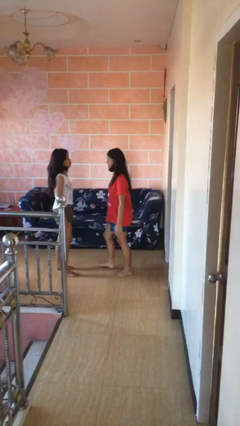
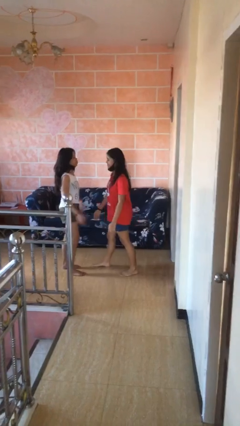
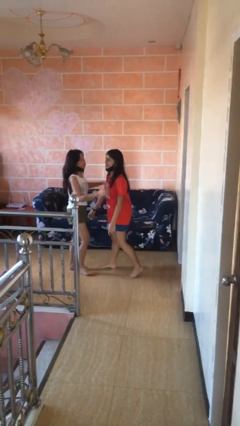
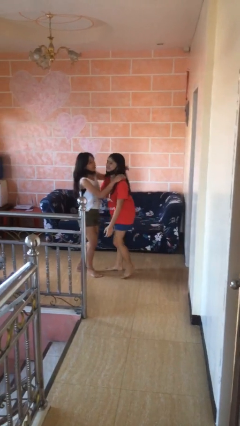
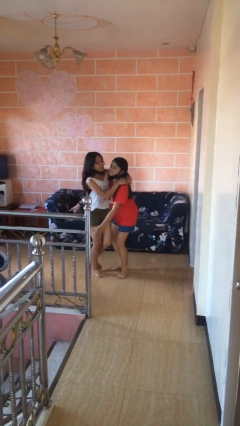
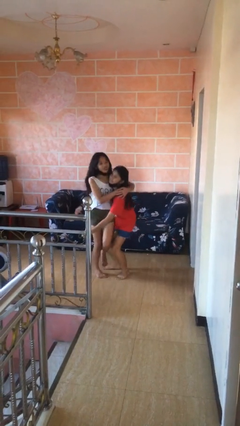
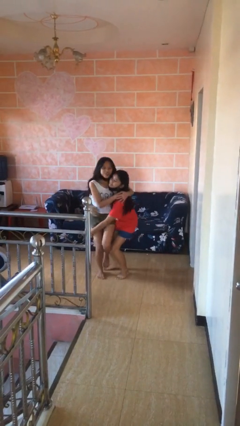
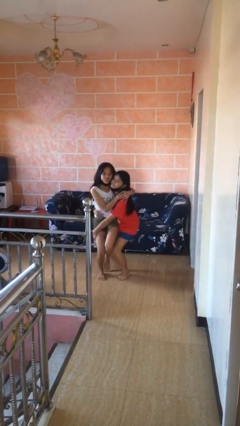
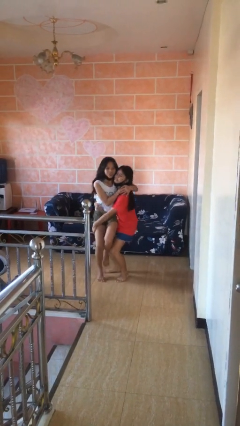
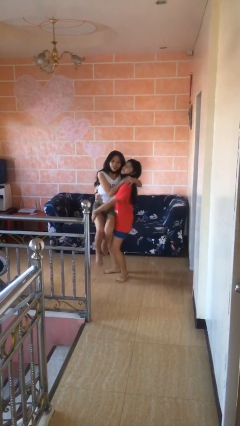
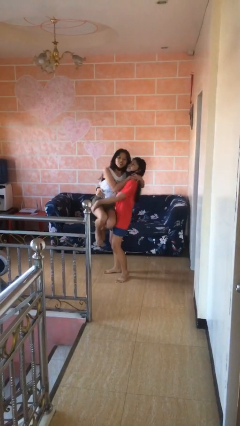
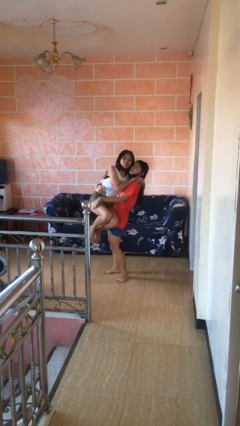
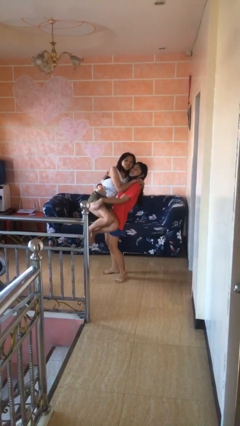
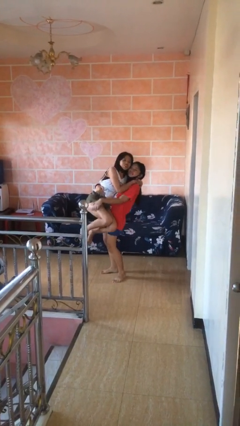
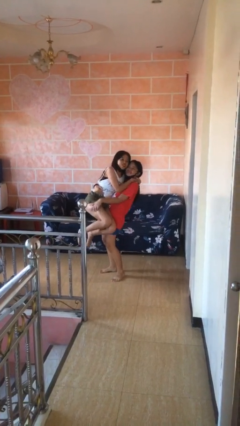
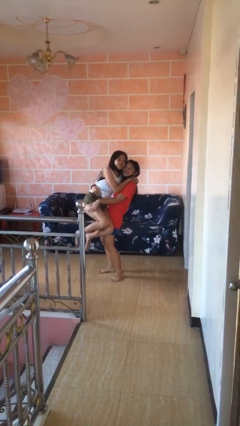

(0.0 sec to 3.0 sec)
person picks up person

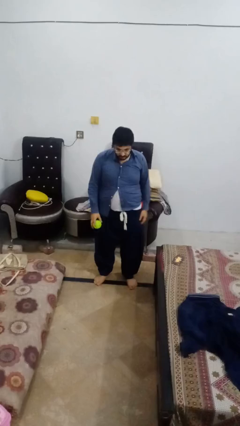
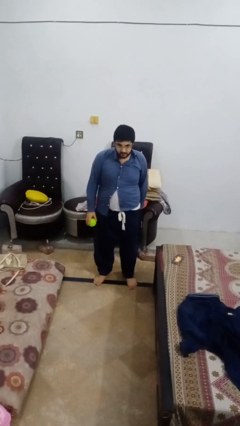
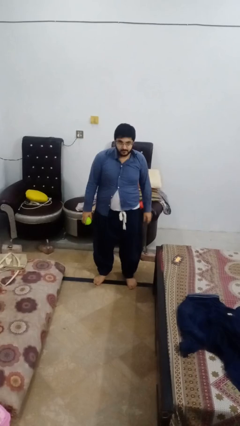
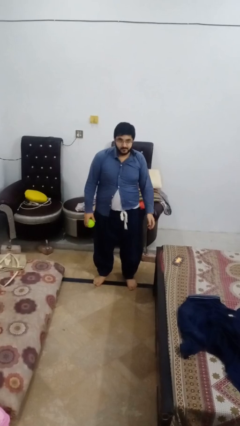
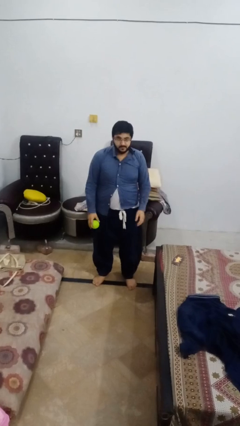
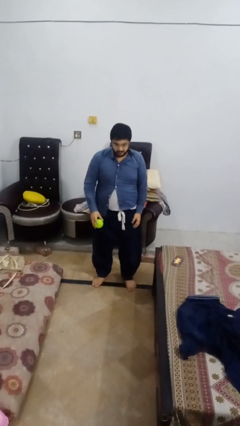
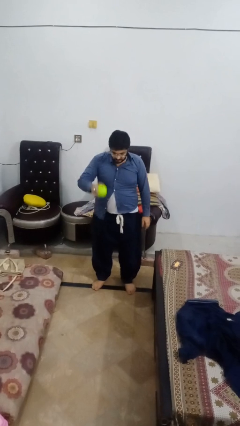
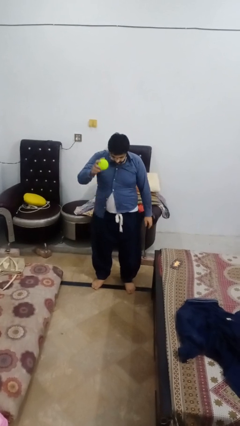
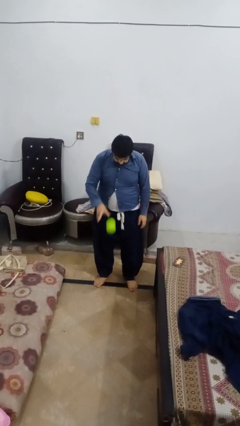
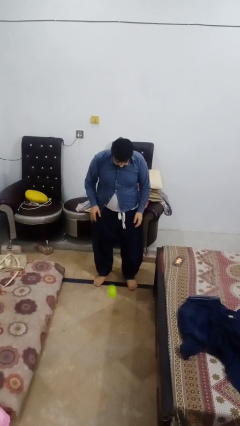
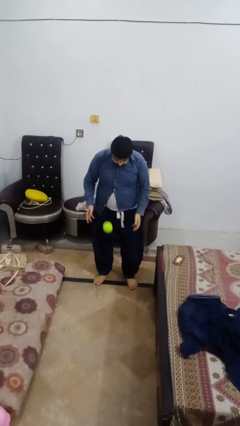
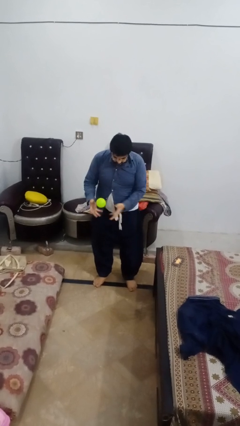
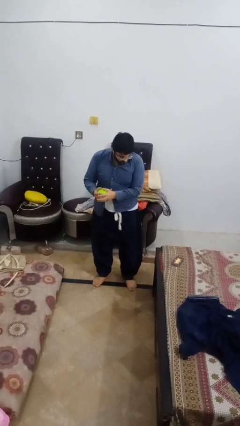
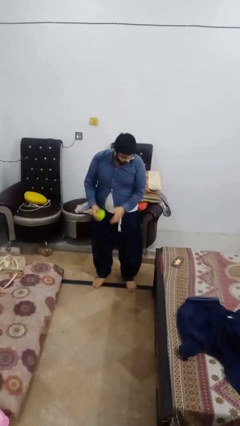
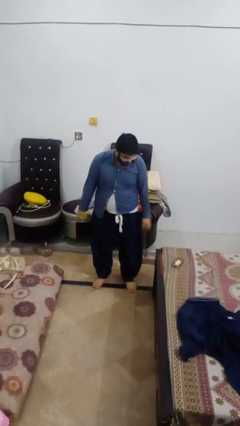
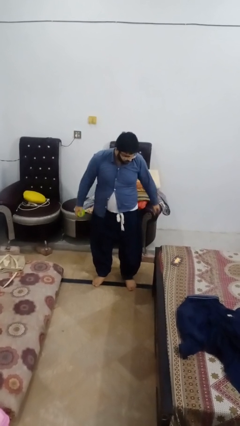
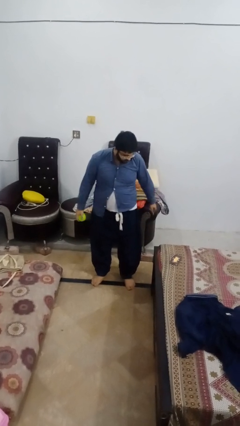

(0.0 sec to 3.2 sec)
person bounces ball on floor

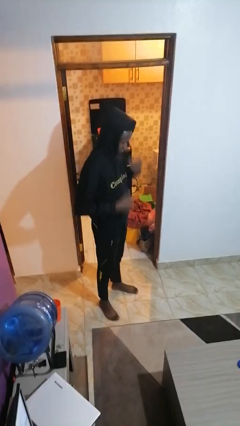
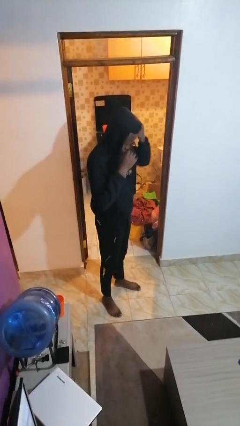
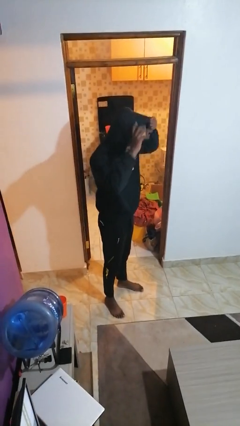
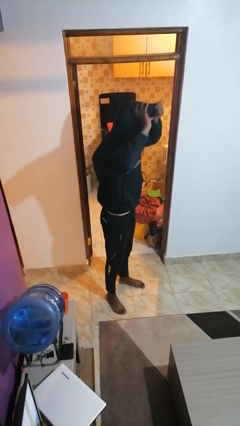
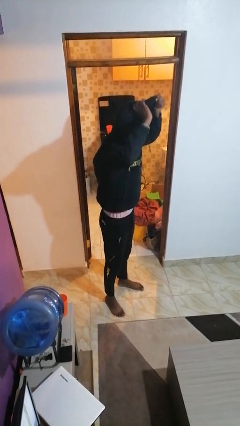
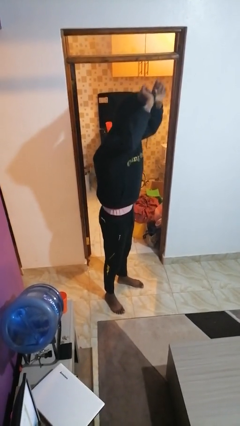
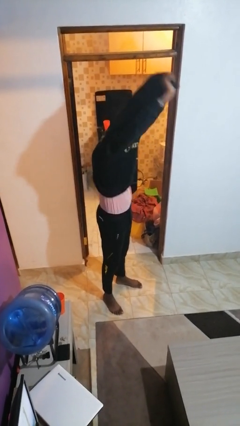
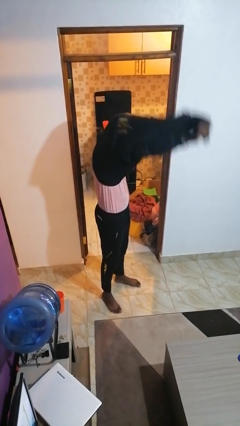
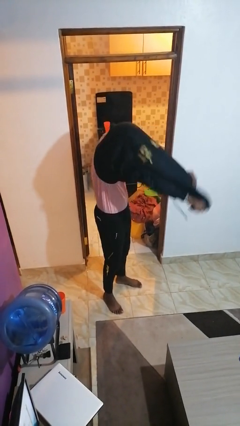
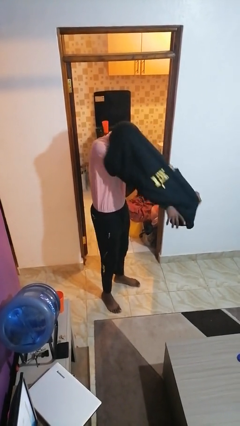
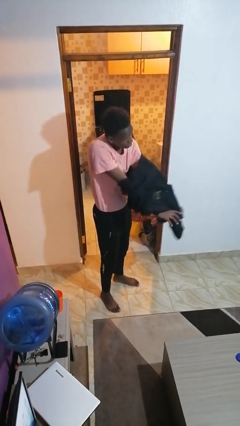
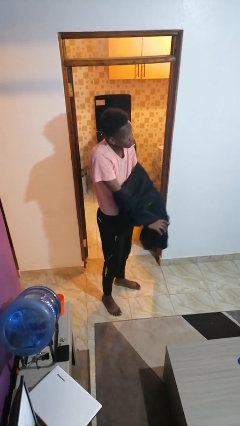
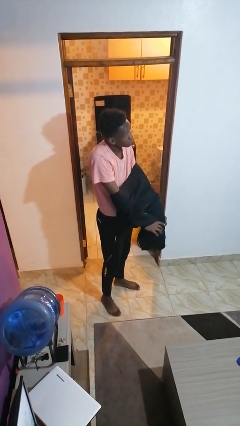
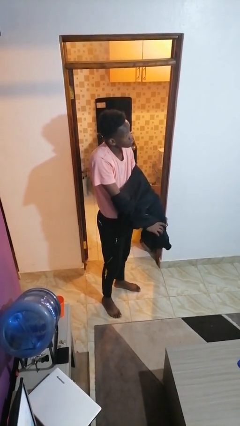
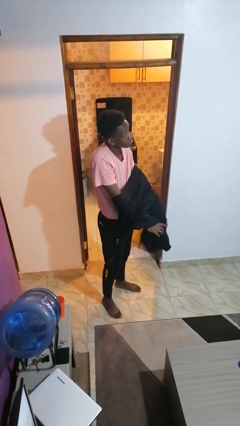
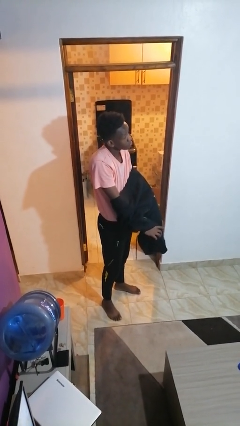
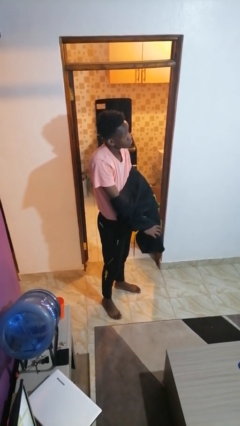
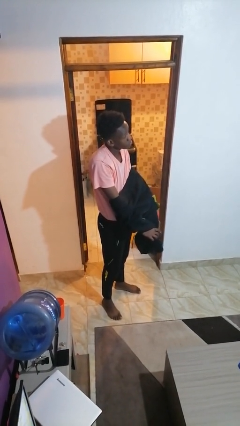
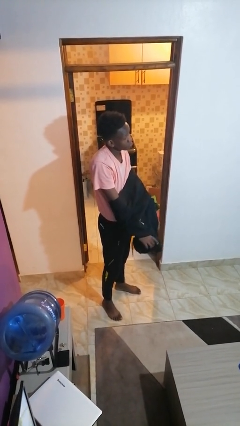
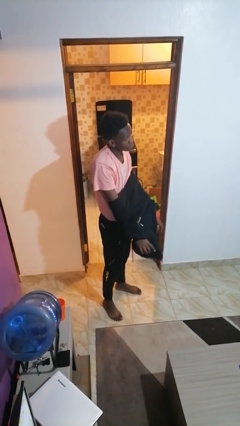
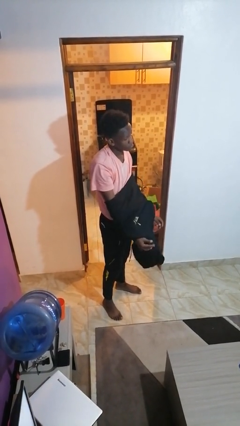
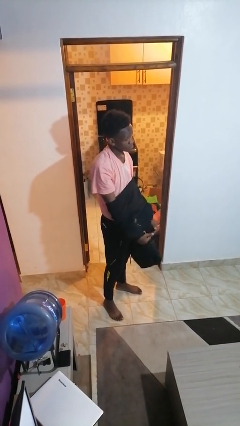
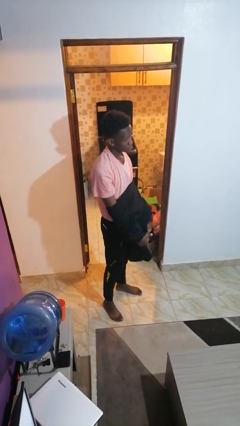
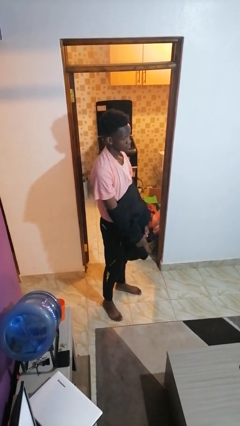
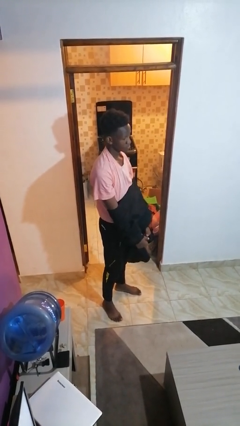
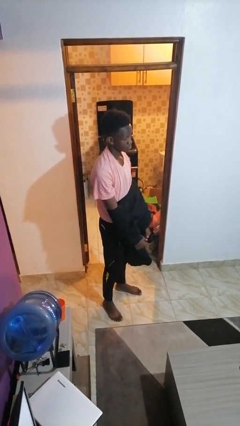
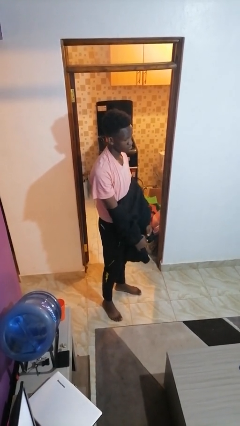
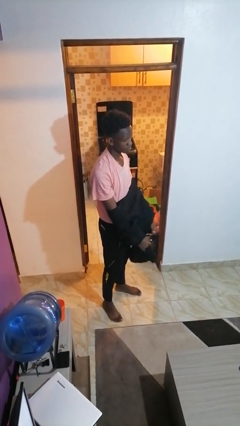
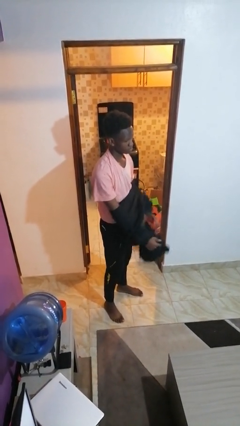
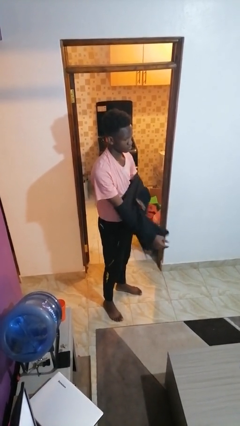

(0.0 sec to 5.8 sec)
person takes off hoodie

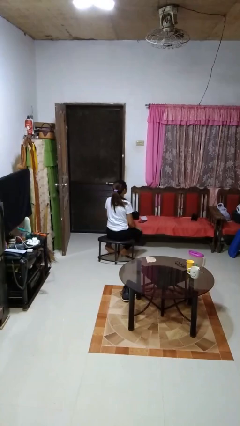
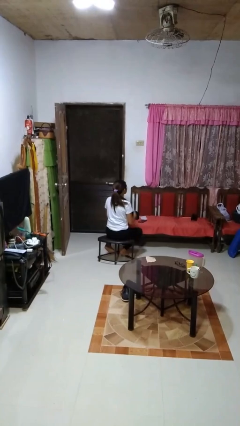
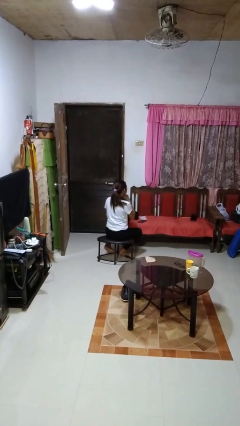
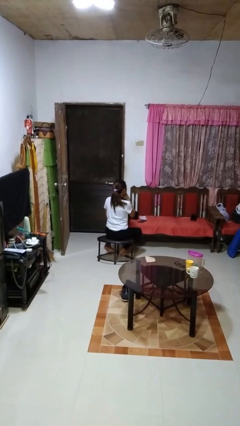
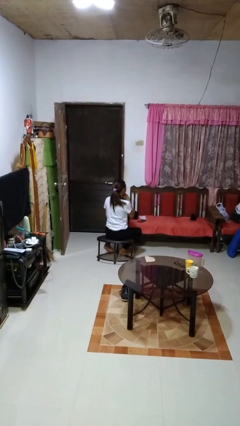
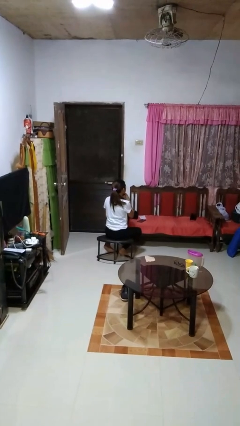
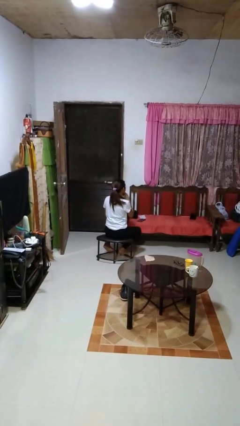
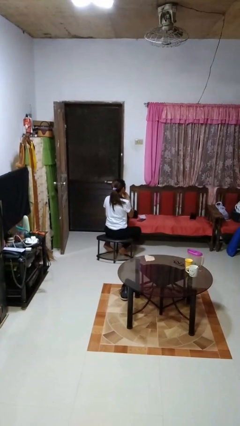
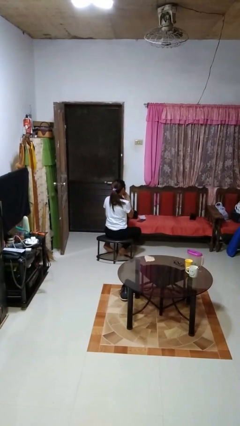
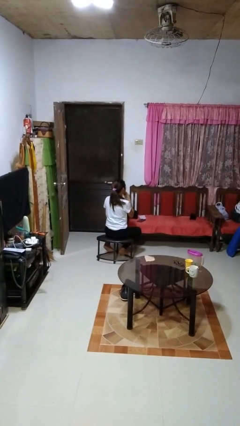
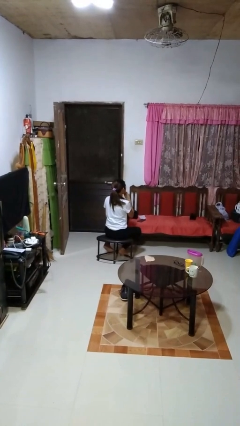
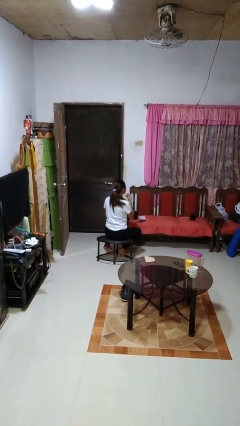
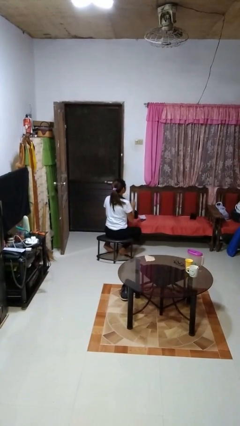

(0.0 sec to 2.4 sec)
person strokes chin

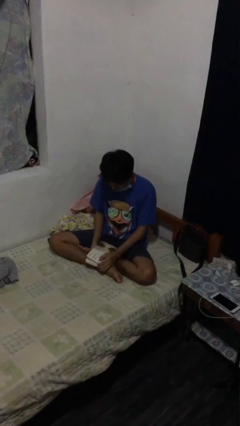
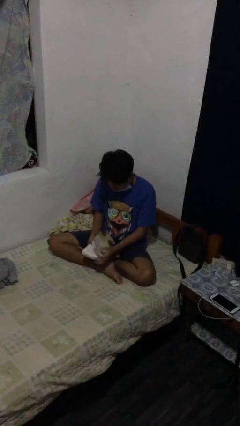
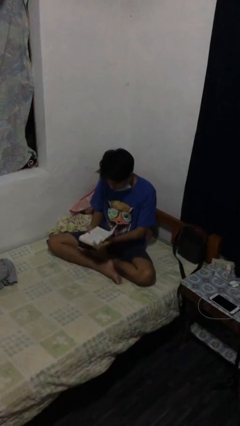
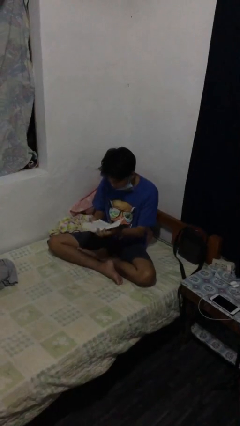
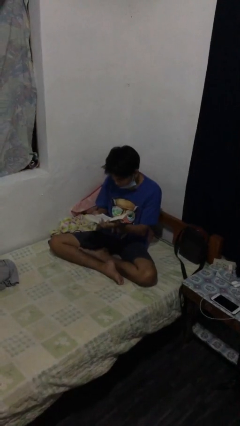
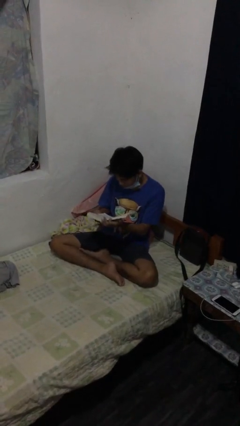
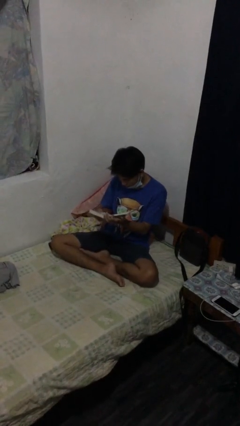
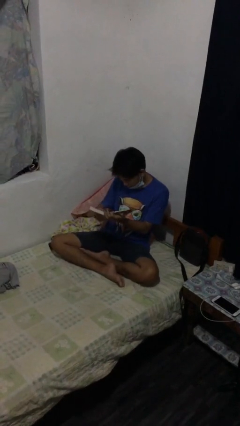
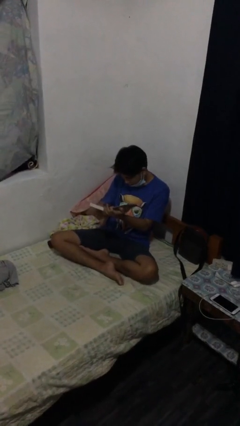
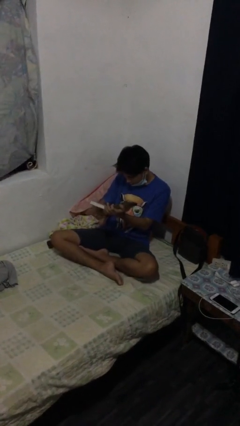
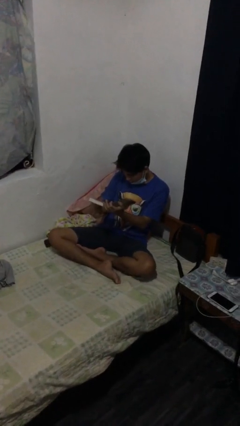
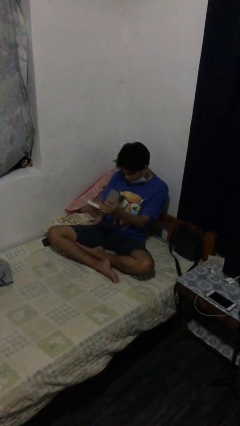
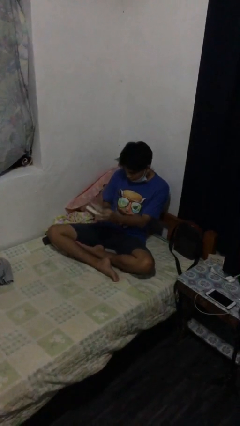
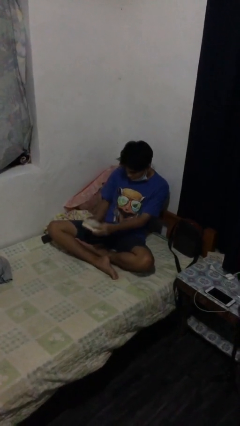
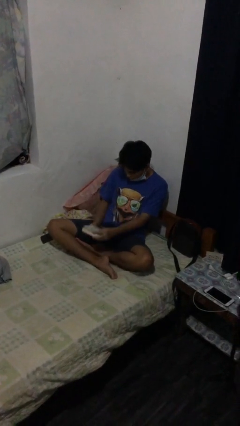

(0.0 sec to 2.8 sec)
person reads document
